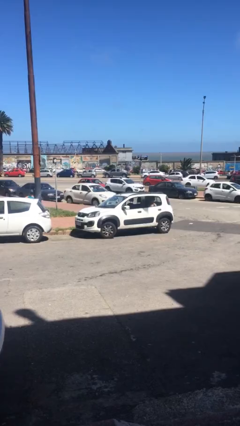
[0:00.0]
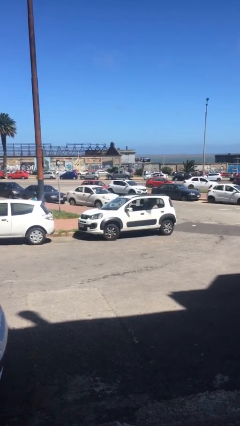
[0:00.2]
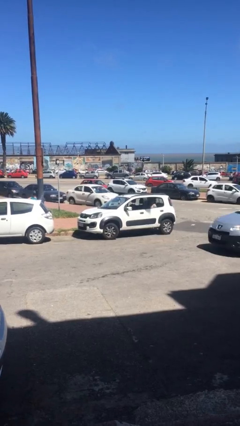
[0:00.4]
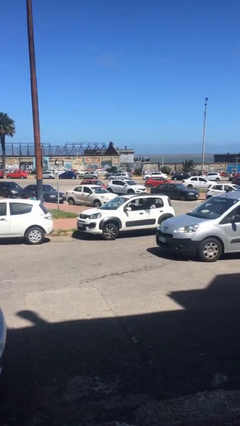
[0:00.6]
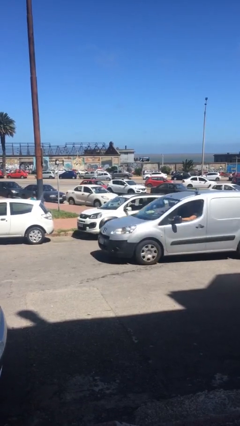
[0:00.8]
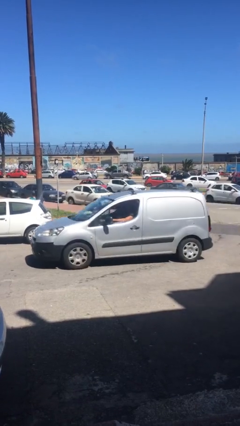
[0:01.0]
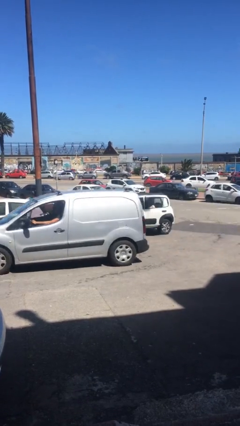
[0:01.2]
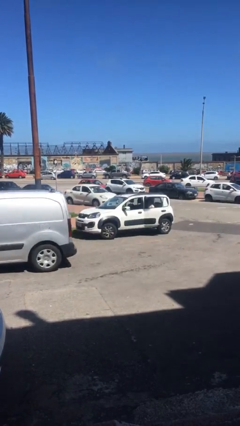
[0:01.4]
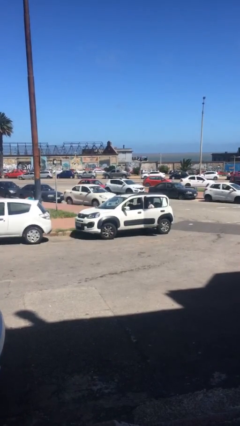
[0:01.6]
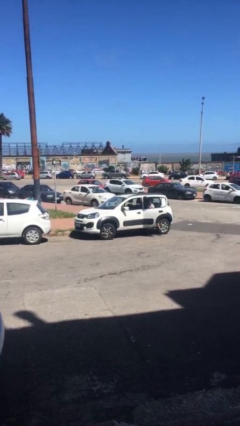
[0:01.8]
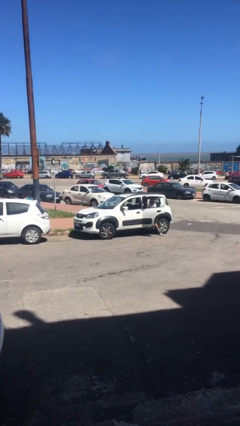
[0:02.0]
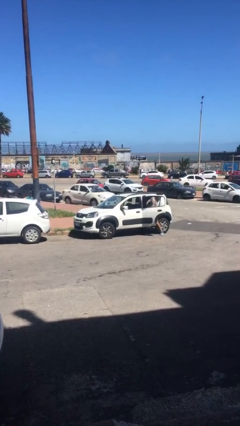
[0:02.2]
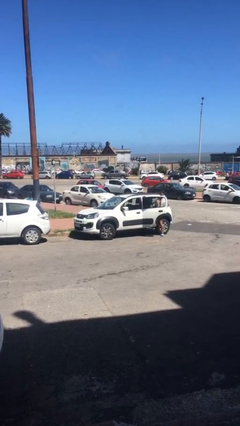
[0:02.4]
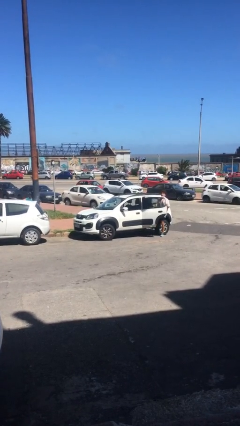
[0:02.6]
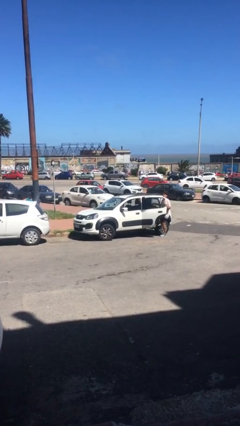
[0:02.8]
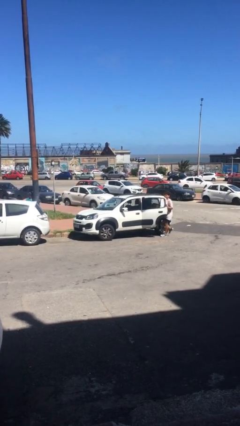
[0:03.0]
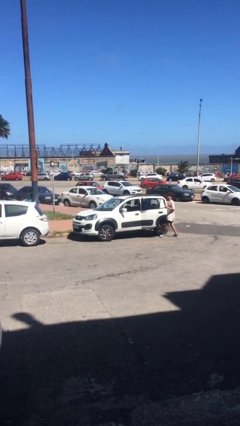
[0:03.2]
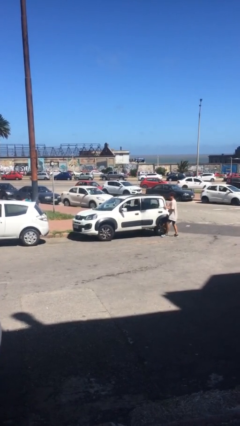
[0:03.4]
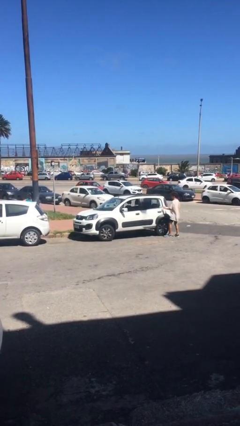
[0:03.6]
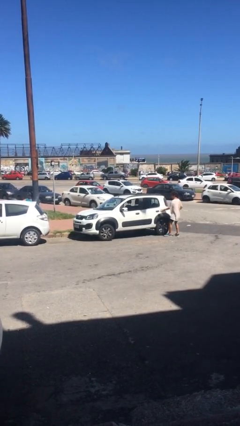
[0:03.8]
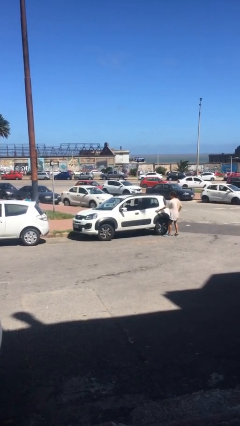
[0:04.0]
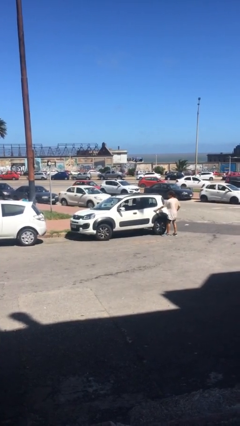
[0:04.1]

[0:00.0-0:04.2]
car drops off person

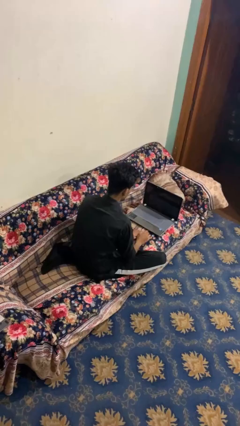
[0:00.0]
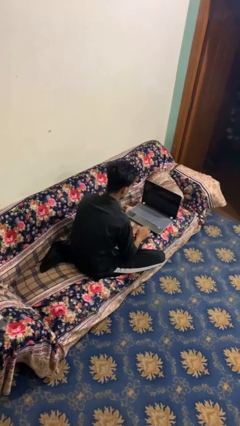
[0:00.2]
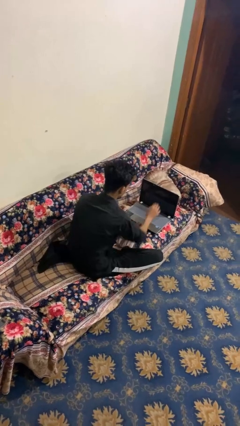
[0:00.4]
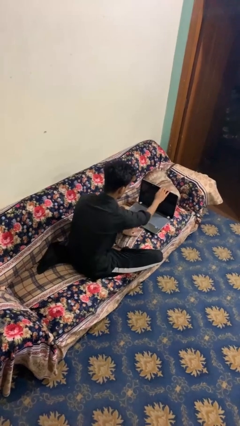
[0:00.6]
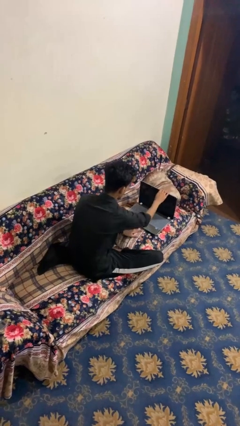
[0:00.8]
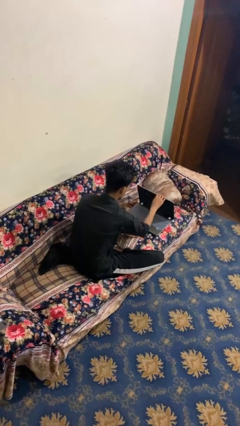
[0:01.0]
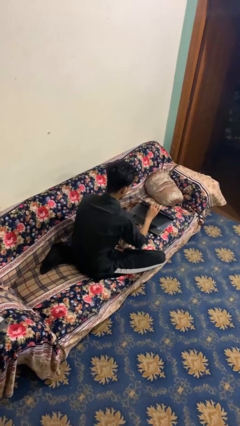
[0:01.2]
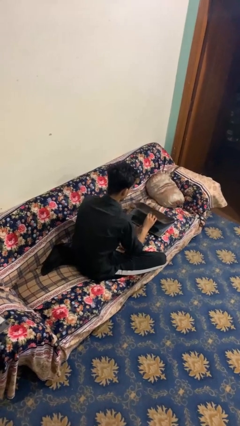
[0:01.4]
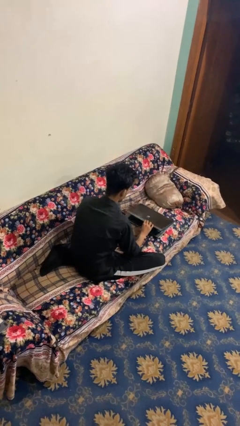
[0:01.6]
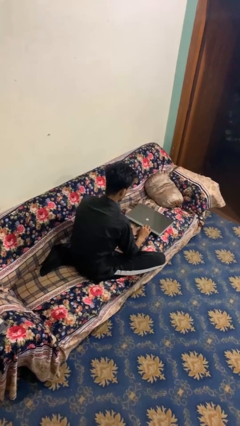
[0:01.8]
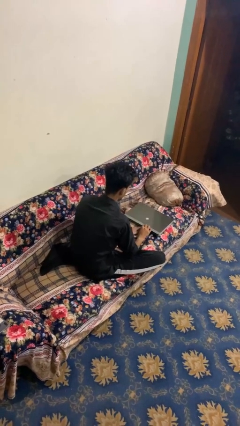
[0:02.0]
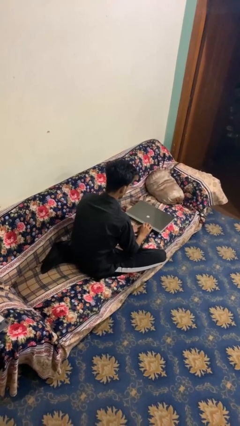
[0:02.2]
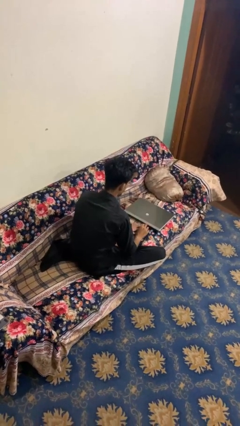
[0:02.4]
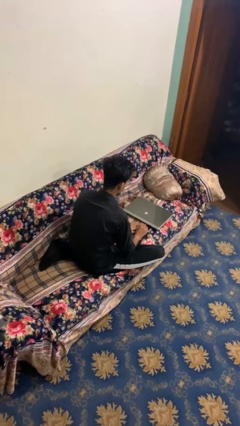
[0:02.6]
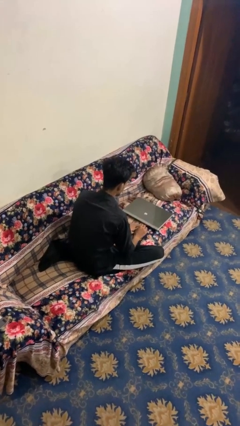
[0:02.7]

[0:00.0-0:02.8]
person closes laptop

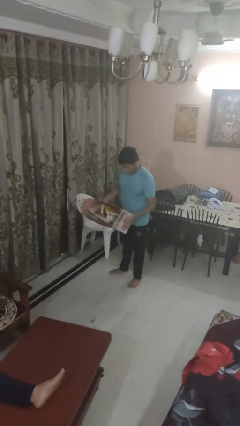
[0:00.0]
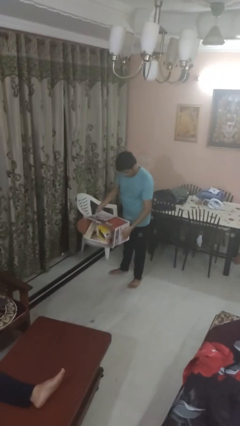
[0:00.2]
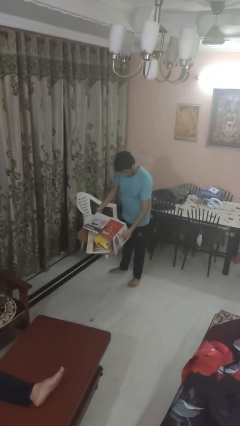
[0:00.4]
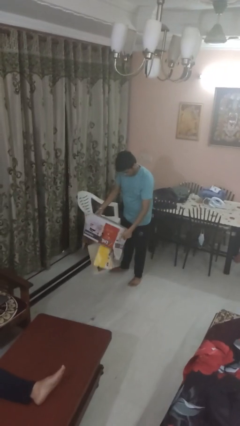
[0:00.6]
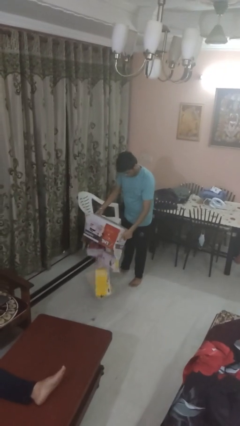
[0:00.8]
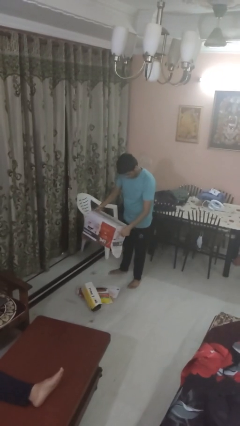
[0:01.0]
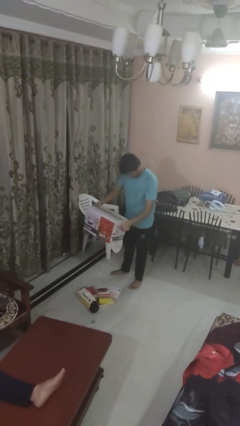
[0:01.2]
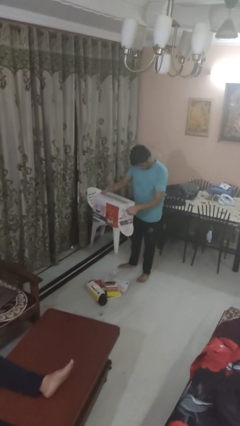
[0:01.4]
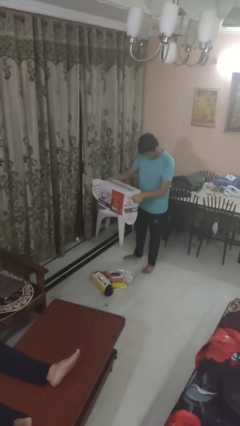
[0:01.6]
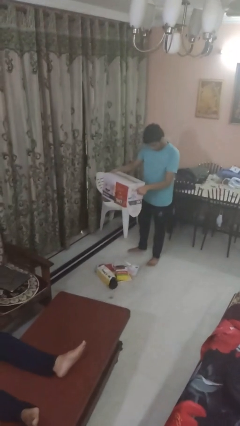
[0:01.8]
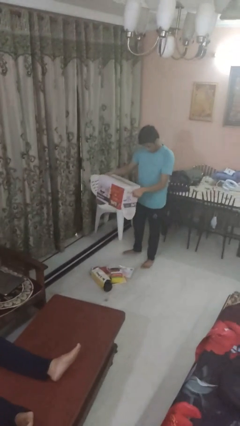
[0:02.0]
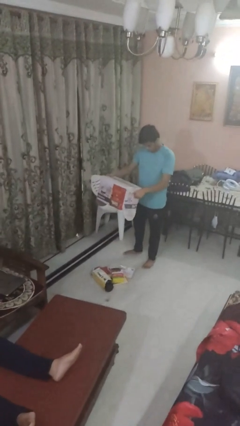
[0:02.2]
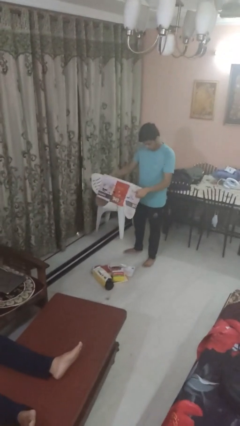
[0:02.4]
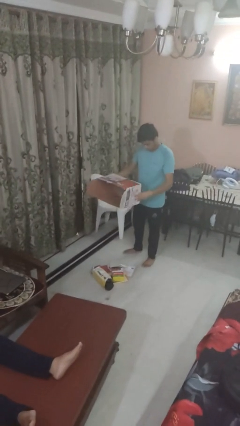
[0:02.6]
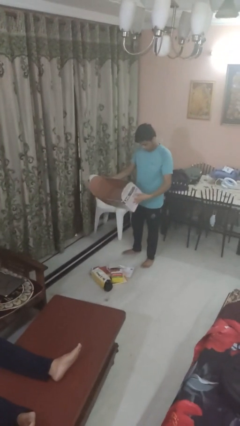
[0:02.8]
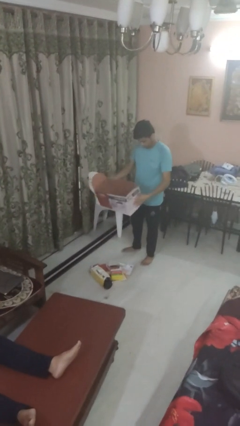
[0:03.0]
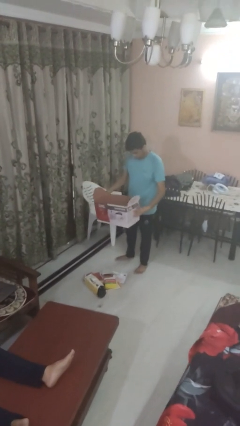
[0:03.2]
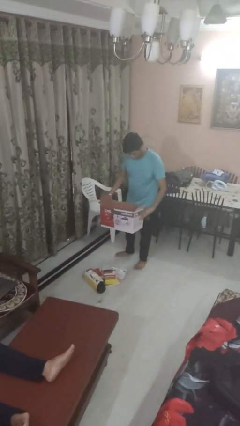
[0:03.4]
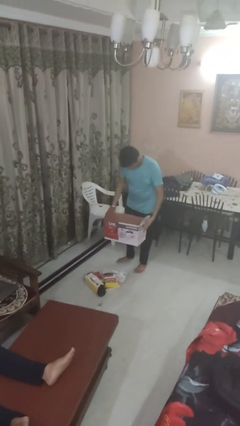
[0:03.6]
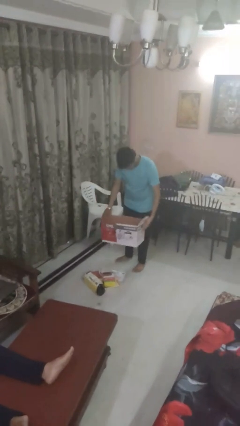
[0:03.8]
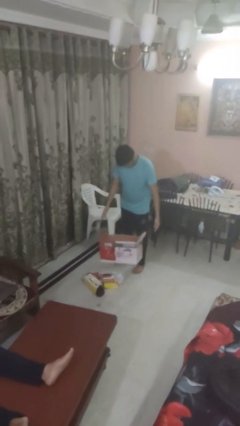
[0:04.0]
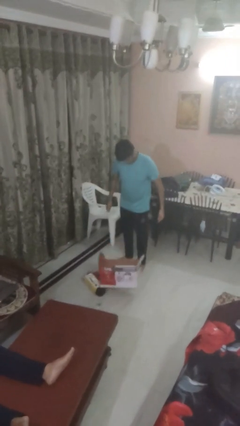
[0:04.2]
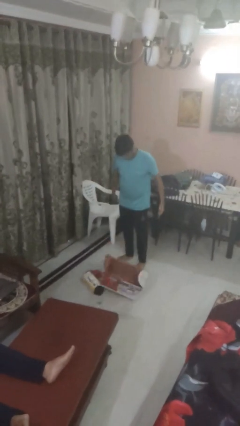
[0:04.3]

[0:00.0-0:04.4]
person unloads box onto floor

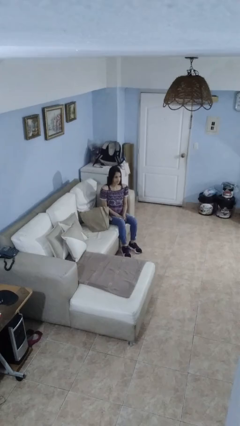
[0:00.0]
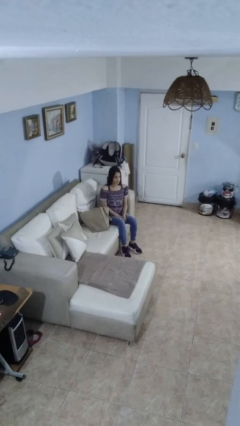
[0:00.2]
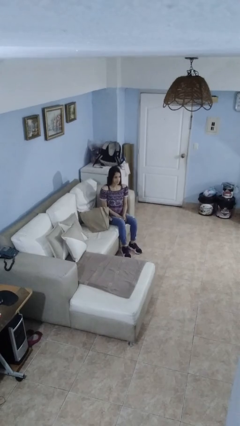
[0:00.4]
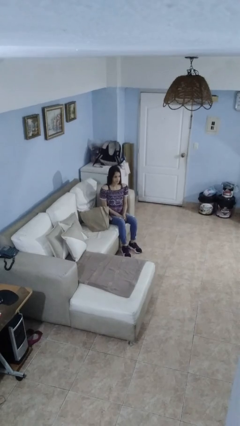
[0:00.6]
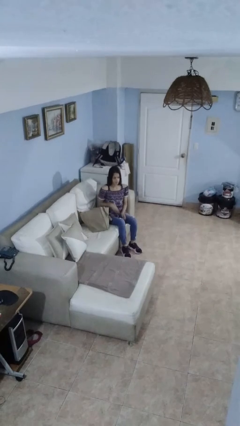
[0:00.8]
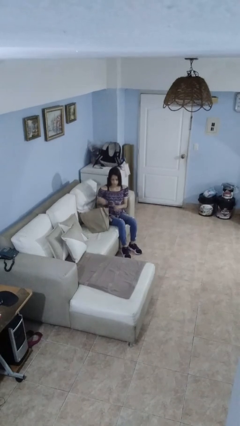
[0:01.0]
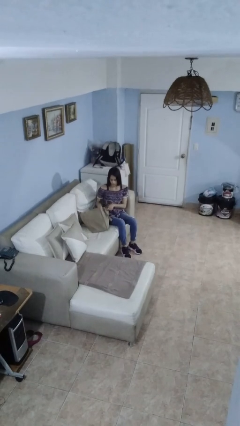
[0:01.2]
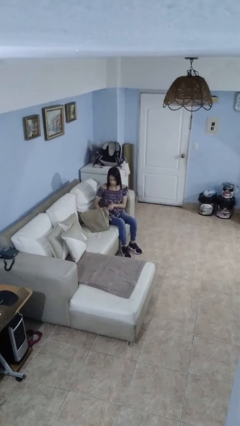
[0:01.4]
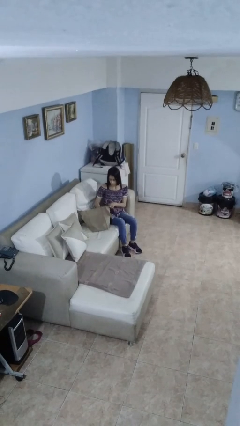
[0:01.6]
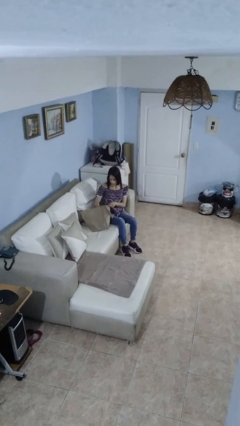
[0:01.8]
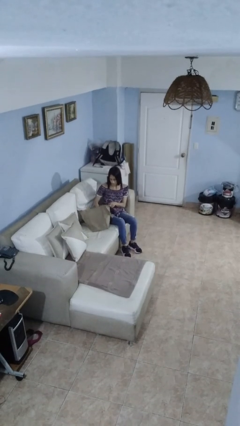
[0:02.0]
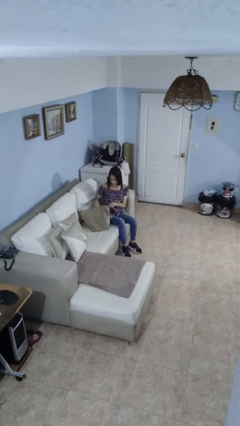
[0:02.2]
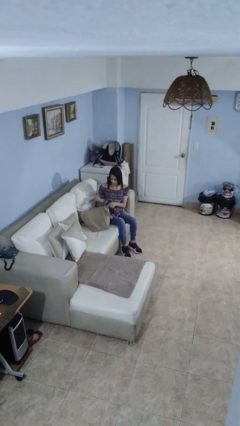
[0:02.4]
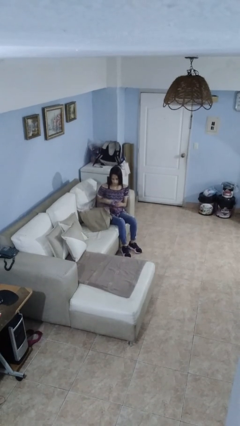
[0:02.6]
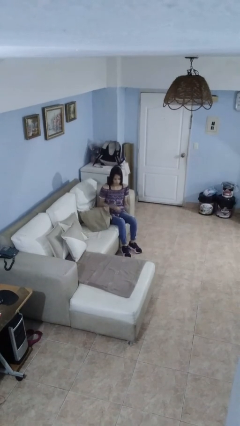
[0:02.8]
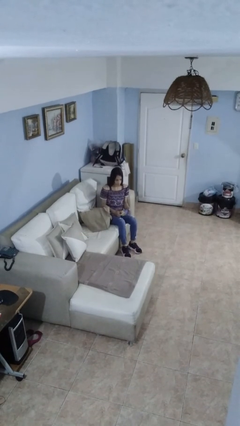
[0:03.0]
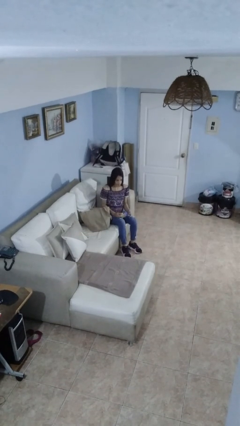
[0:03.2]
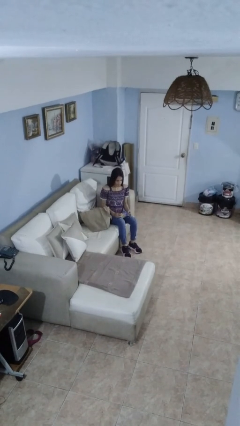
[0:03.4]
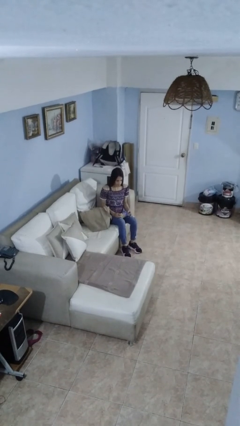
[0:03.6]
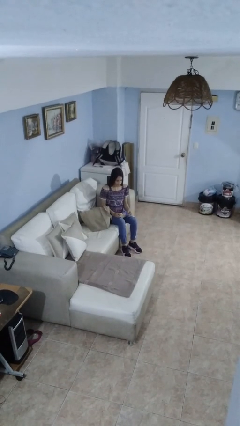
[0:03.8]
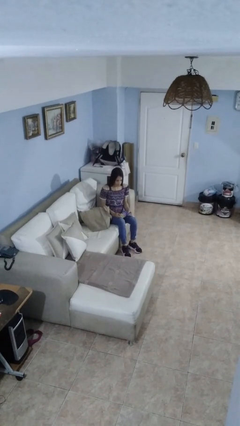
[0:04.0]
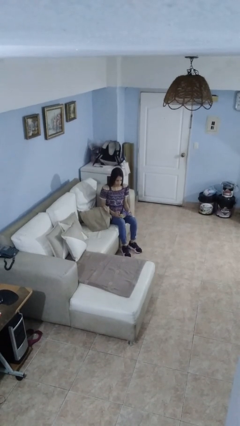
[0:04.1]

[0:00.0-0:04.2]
person takes object from bag

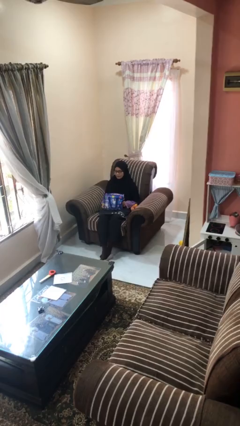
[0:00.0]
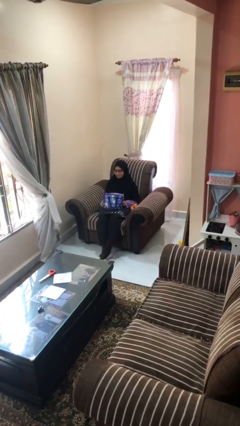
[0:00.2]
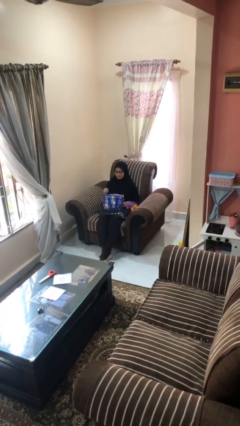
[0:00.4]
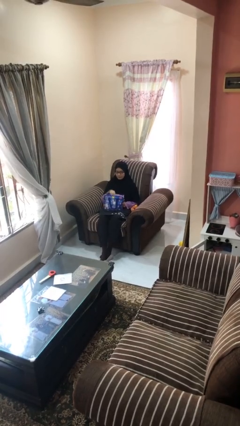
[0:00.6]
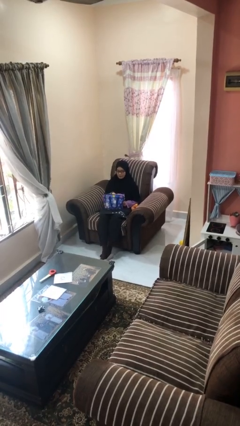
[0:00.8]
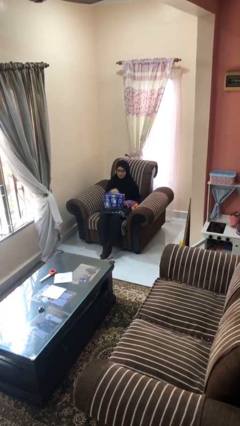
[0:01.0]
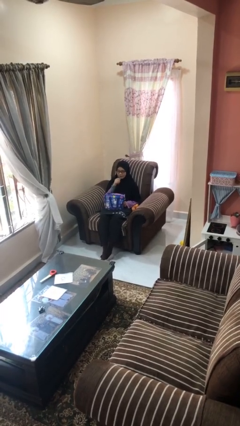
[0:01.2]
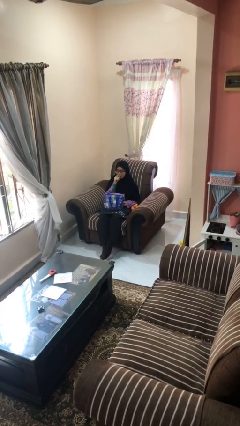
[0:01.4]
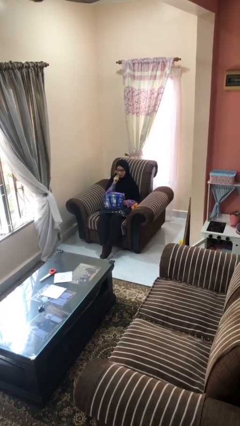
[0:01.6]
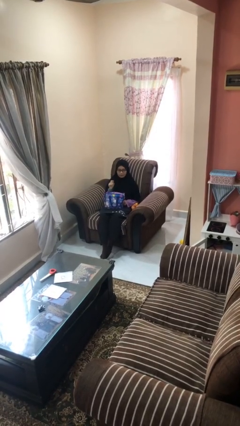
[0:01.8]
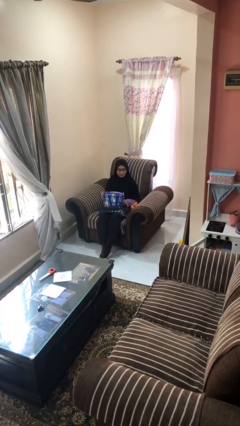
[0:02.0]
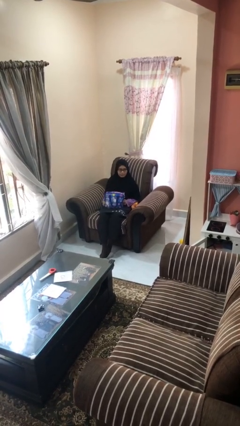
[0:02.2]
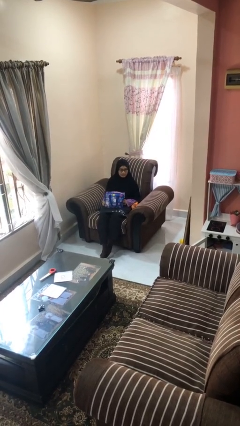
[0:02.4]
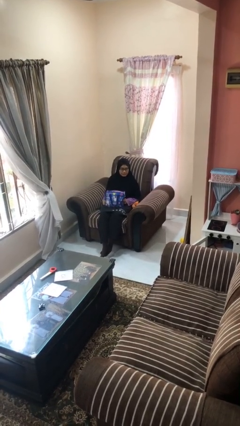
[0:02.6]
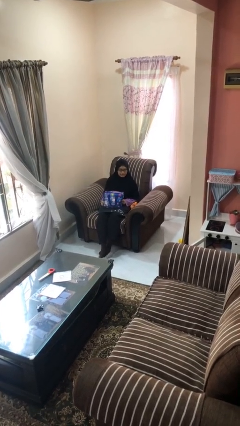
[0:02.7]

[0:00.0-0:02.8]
person eats snack from bag
